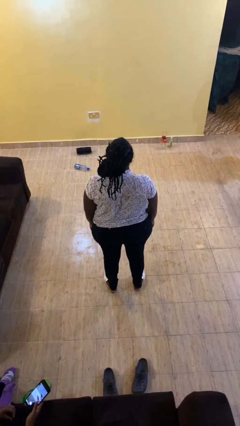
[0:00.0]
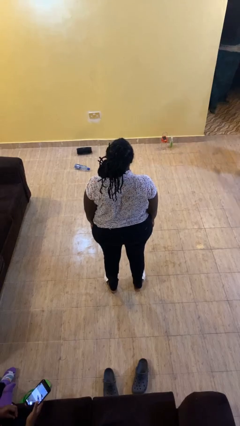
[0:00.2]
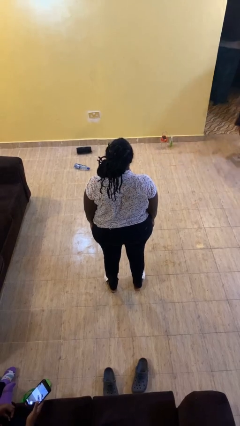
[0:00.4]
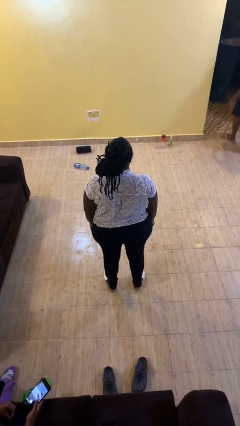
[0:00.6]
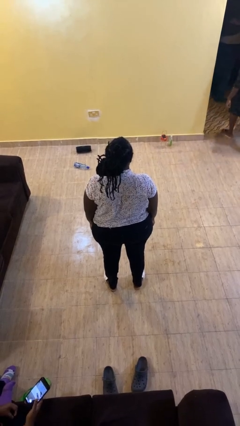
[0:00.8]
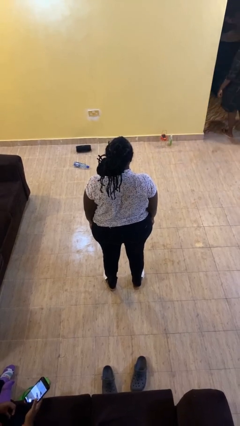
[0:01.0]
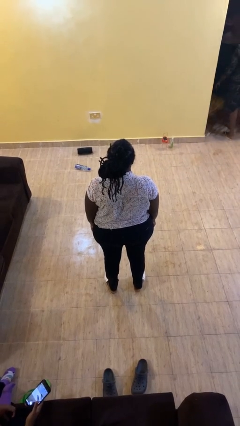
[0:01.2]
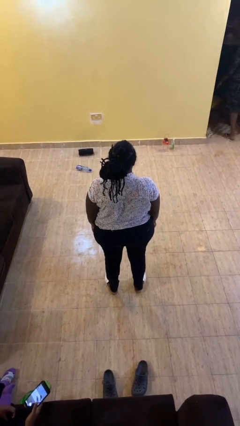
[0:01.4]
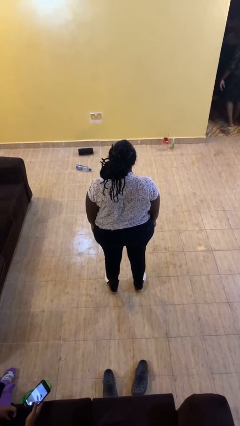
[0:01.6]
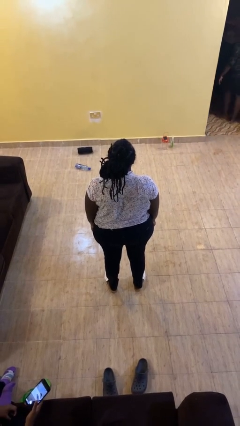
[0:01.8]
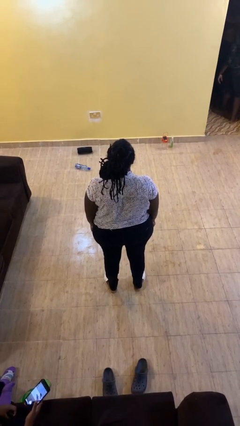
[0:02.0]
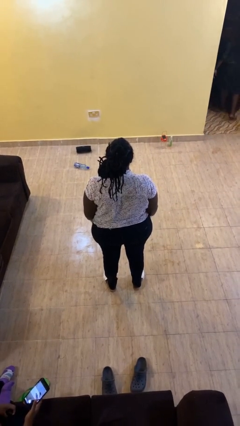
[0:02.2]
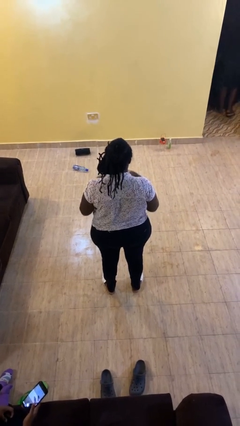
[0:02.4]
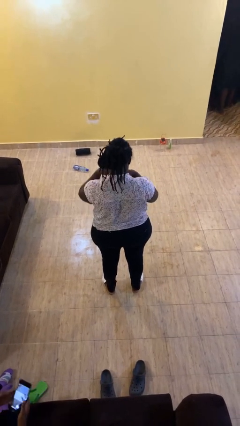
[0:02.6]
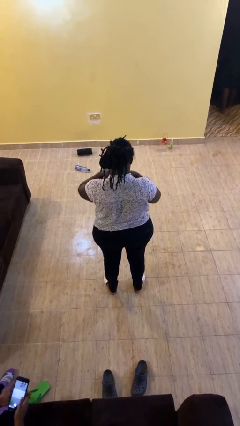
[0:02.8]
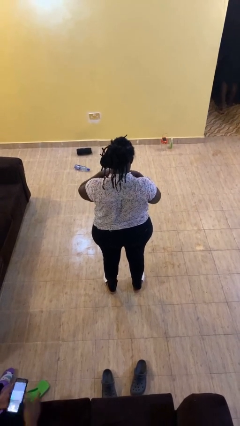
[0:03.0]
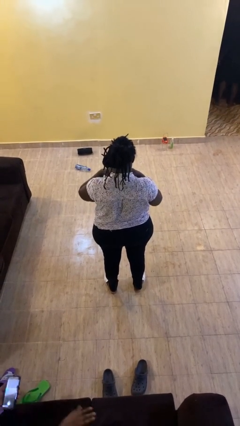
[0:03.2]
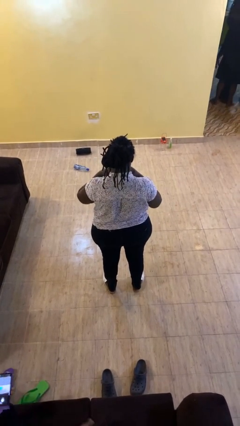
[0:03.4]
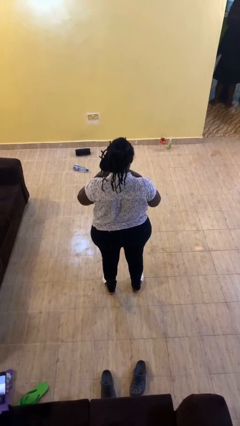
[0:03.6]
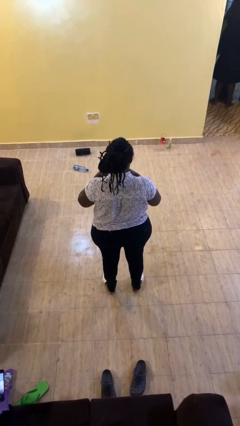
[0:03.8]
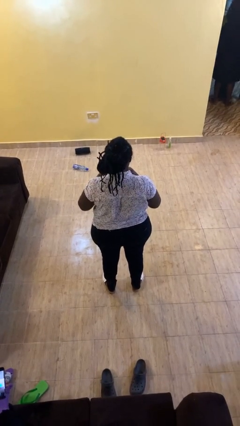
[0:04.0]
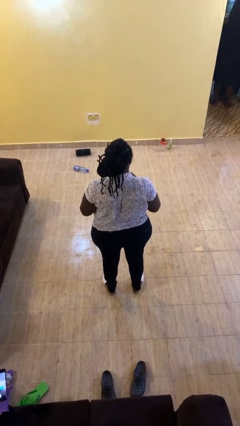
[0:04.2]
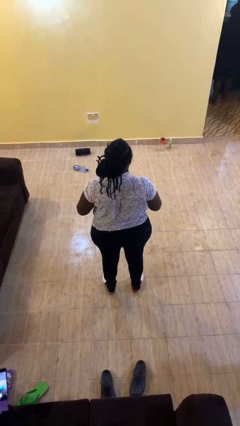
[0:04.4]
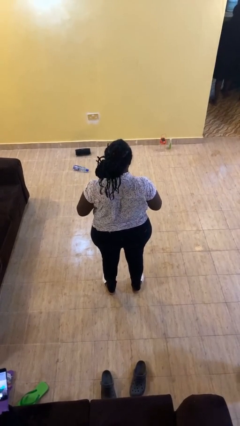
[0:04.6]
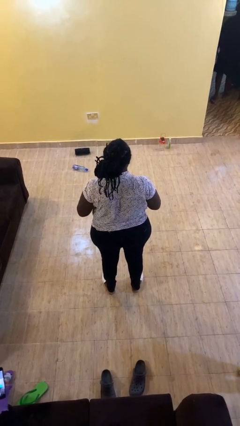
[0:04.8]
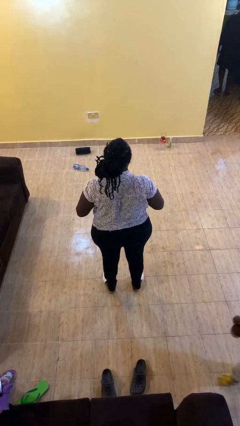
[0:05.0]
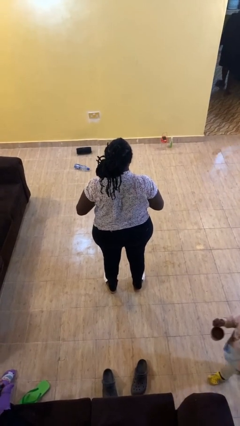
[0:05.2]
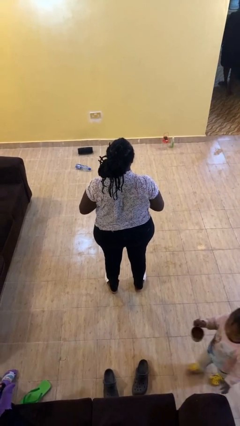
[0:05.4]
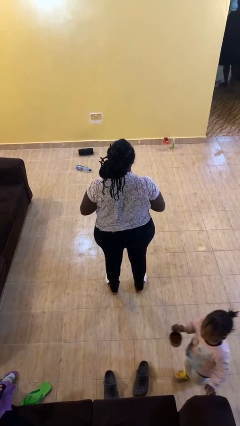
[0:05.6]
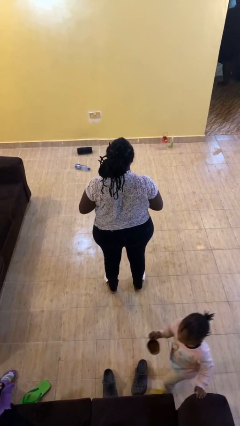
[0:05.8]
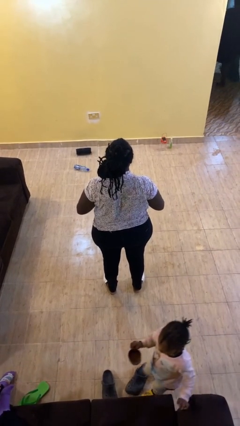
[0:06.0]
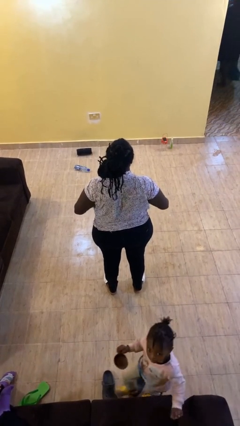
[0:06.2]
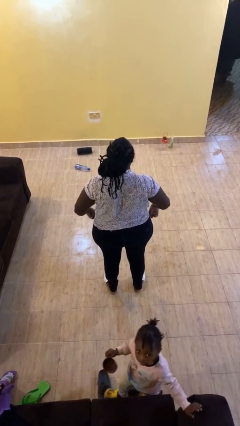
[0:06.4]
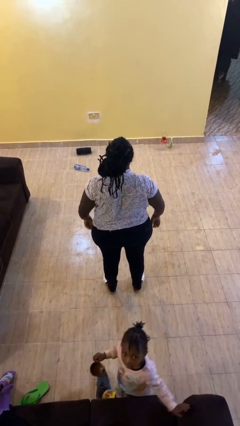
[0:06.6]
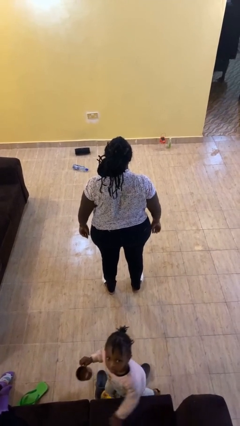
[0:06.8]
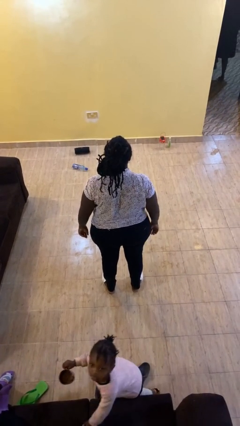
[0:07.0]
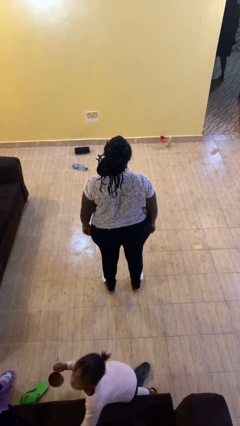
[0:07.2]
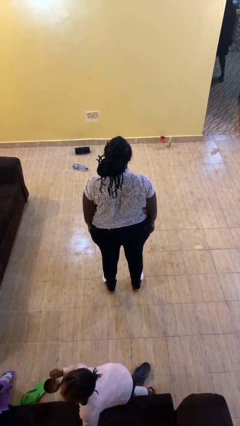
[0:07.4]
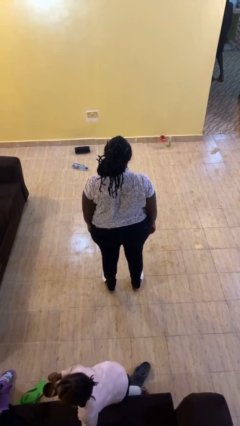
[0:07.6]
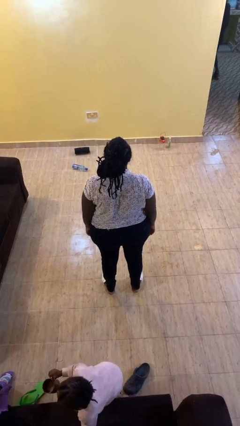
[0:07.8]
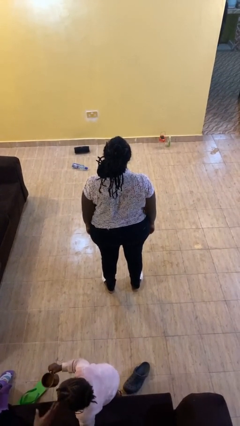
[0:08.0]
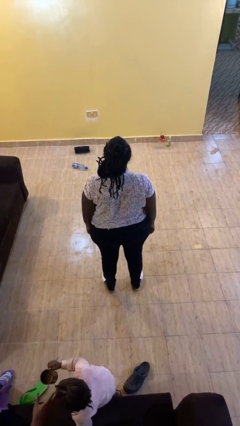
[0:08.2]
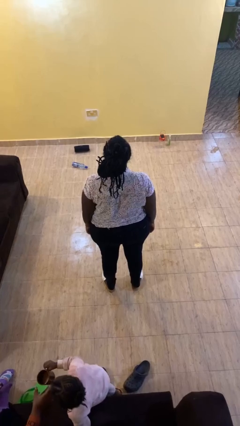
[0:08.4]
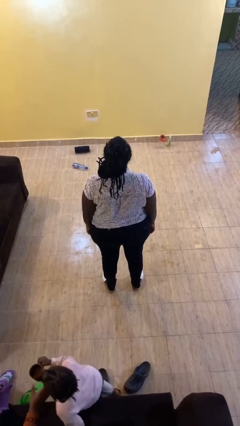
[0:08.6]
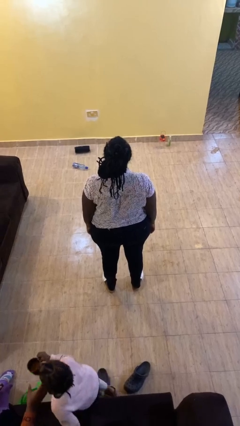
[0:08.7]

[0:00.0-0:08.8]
person unbuttons shirt

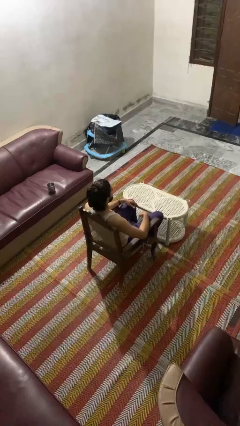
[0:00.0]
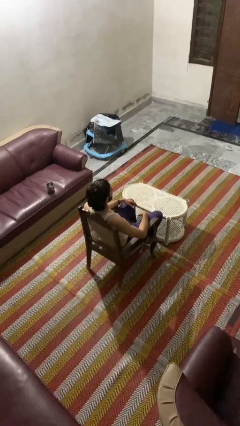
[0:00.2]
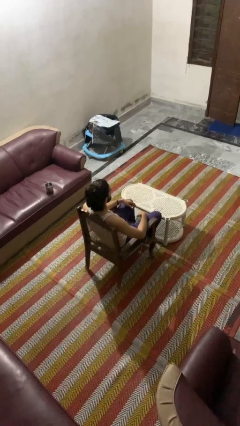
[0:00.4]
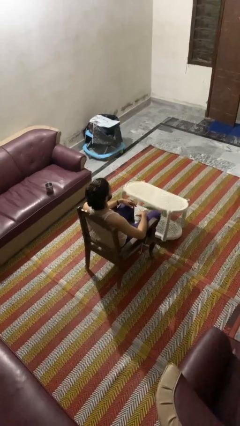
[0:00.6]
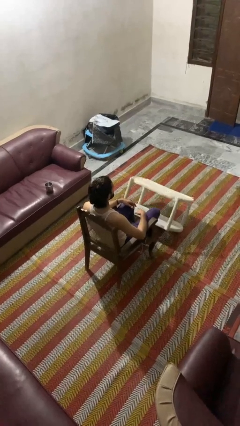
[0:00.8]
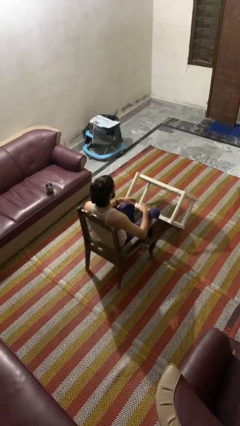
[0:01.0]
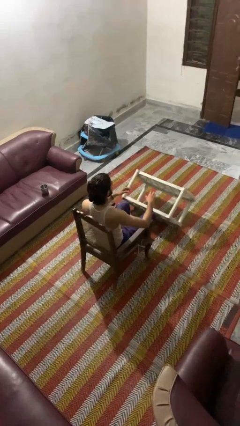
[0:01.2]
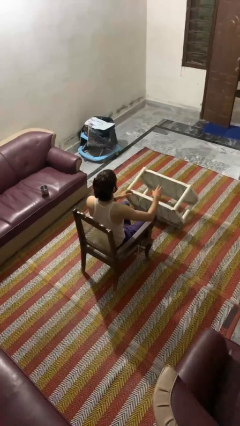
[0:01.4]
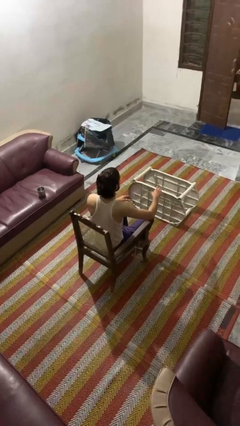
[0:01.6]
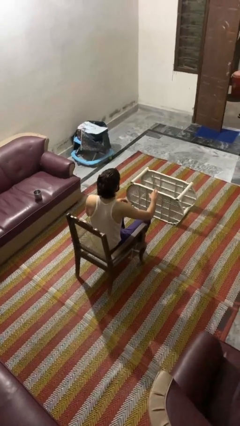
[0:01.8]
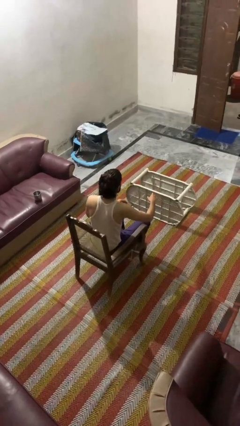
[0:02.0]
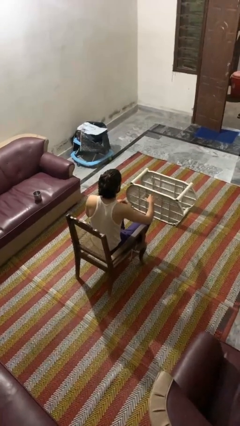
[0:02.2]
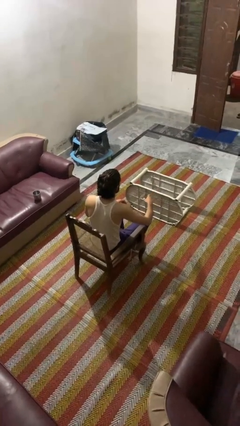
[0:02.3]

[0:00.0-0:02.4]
person knocks over furniture

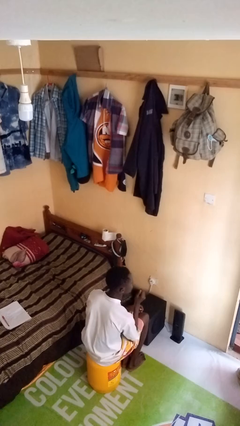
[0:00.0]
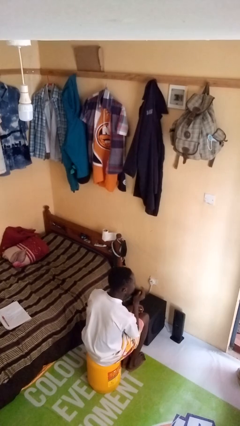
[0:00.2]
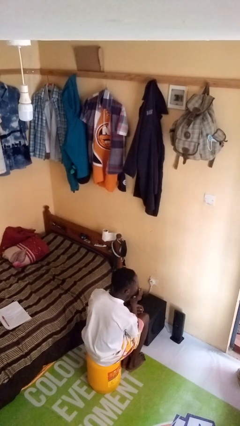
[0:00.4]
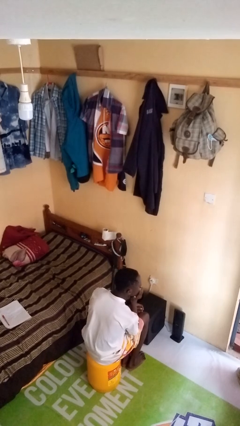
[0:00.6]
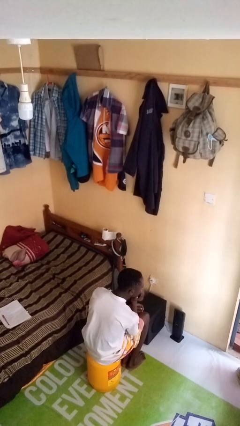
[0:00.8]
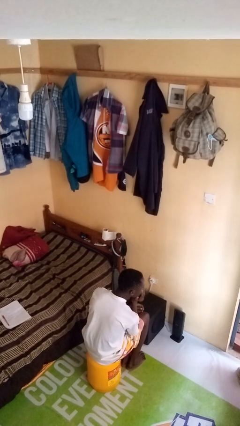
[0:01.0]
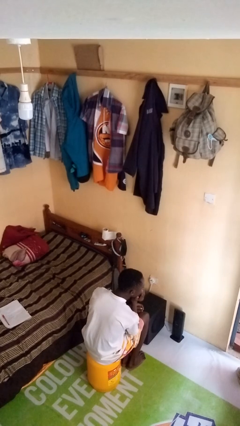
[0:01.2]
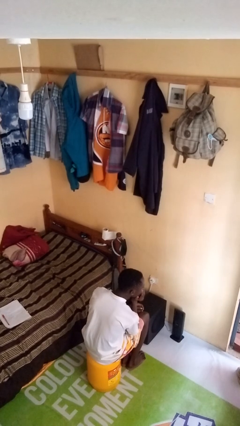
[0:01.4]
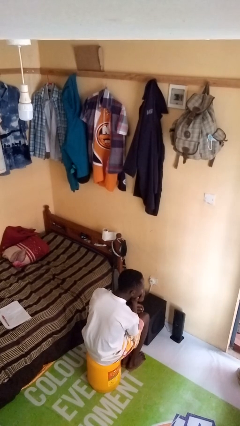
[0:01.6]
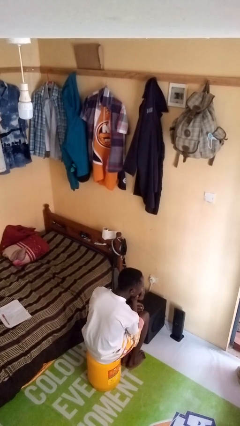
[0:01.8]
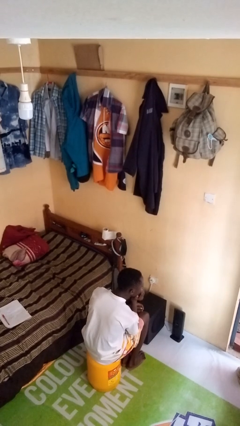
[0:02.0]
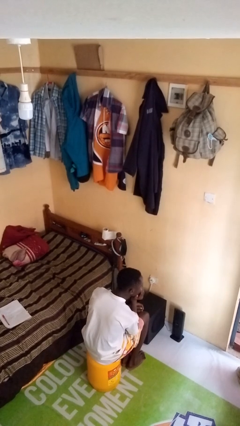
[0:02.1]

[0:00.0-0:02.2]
person strokes chin

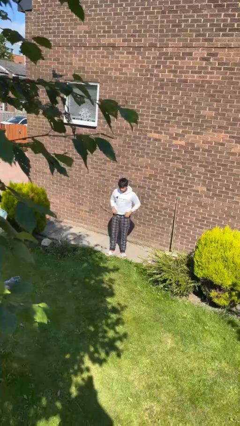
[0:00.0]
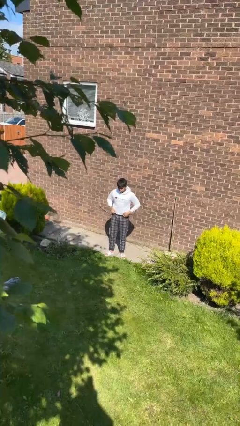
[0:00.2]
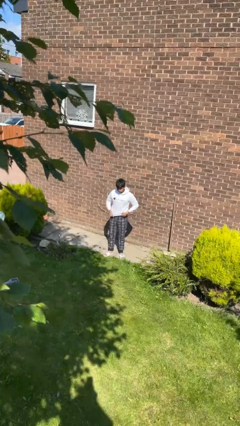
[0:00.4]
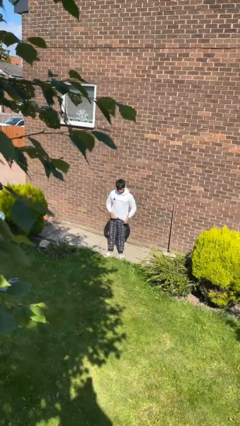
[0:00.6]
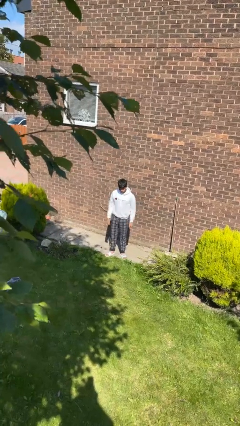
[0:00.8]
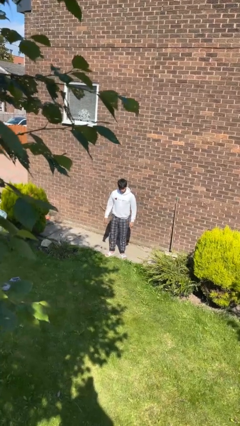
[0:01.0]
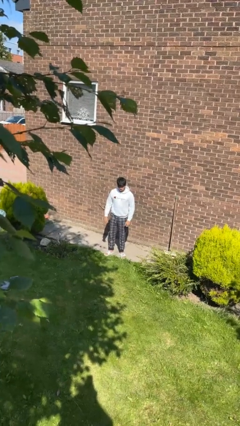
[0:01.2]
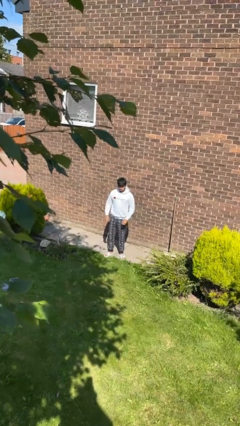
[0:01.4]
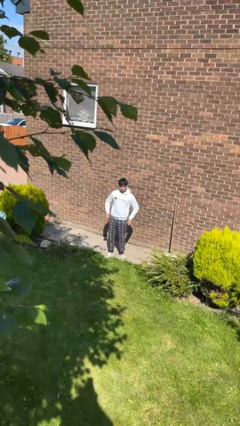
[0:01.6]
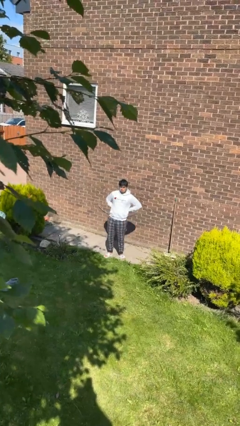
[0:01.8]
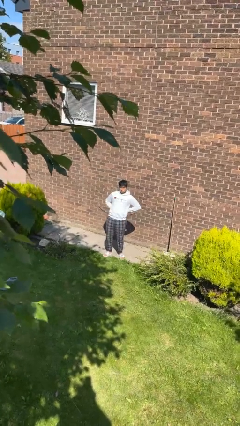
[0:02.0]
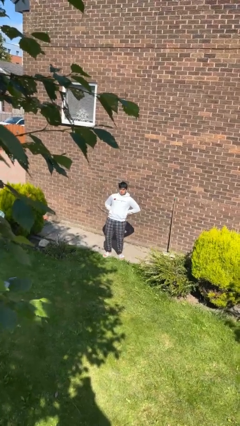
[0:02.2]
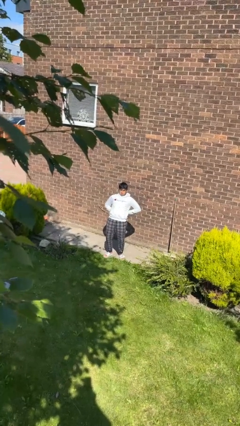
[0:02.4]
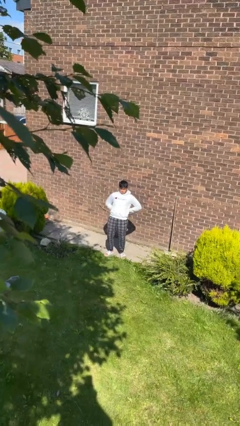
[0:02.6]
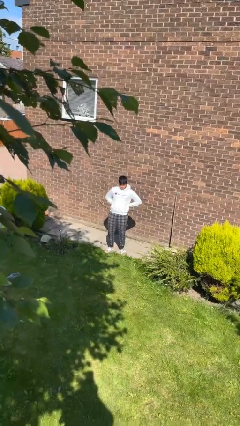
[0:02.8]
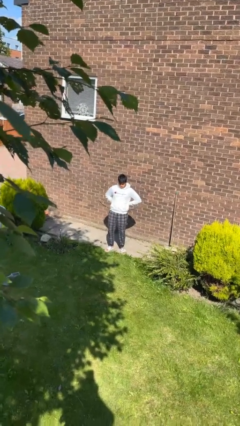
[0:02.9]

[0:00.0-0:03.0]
person stretches back

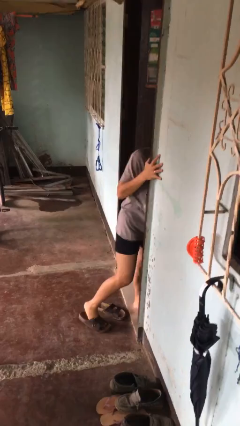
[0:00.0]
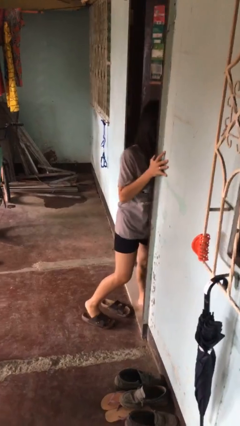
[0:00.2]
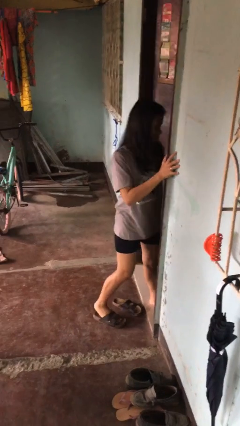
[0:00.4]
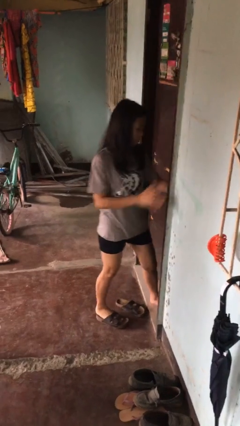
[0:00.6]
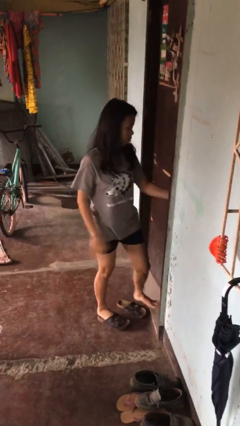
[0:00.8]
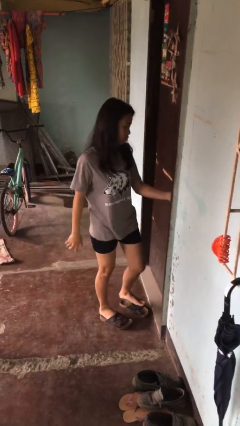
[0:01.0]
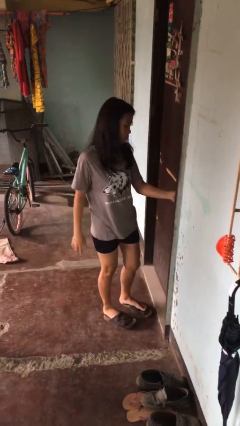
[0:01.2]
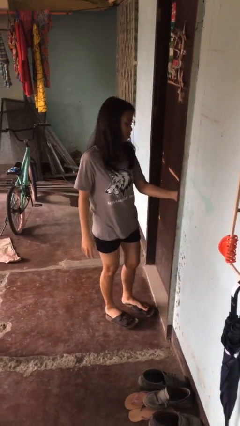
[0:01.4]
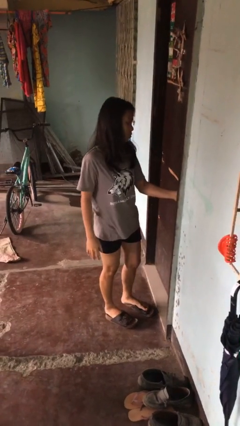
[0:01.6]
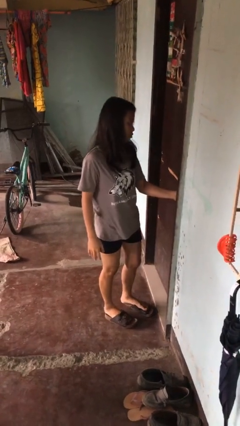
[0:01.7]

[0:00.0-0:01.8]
person closes facility door
